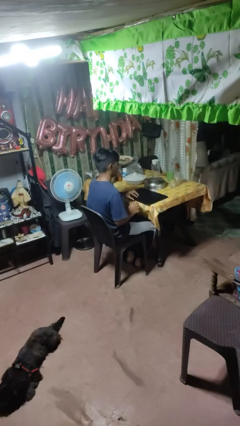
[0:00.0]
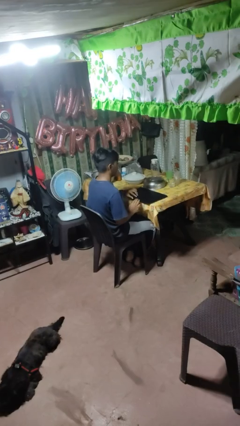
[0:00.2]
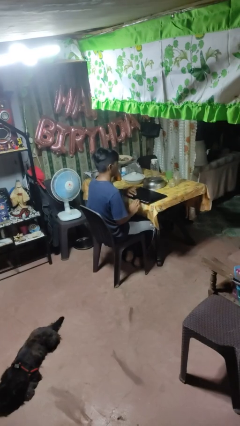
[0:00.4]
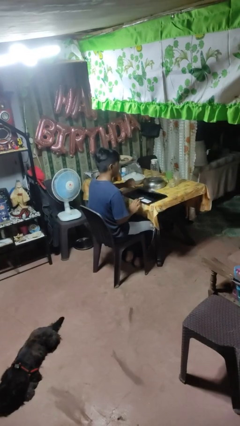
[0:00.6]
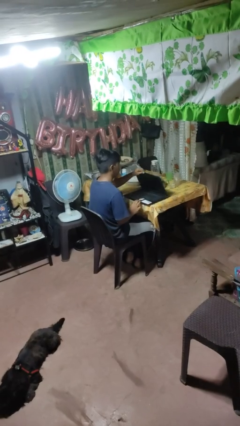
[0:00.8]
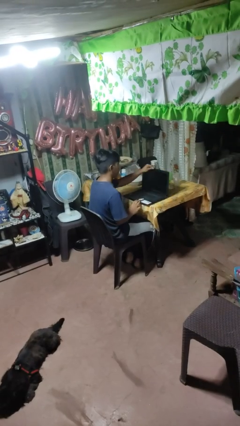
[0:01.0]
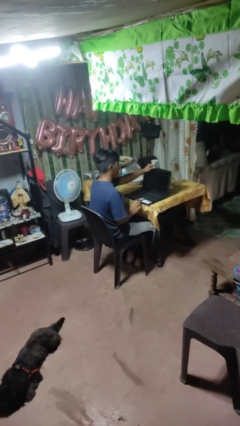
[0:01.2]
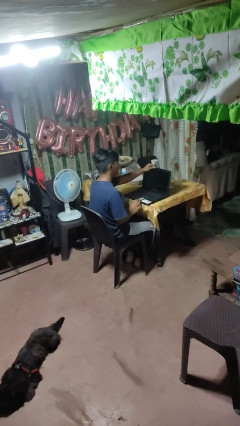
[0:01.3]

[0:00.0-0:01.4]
person opens laptop

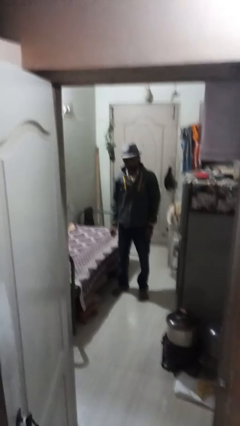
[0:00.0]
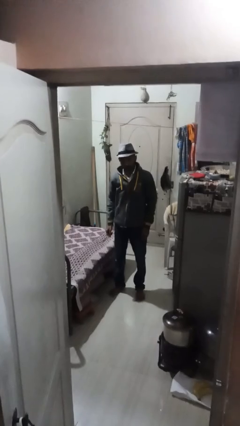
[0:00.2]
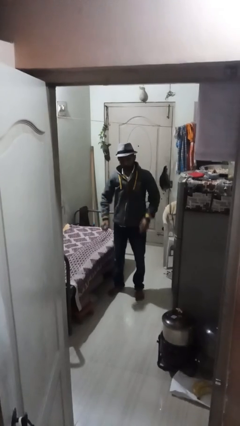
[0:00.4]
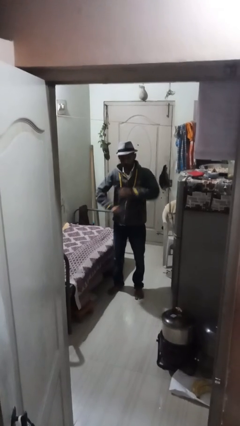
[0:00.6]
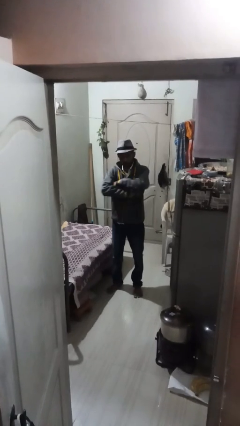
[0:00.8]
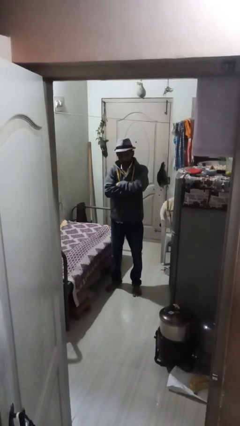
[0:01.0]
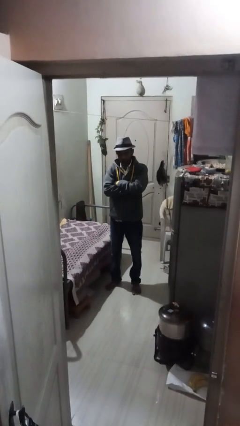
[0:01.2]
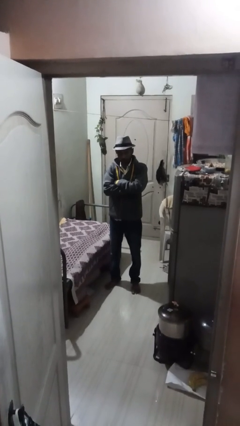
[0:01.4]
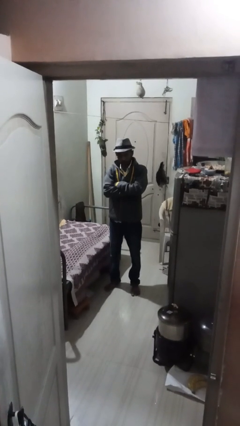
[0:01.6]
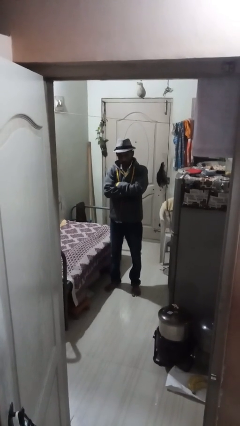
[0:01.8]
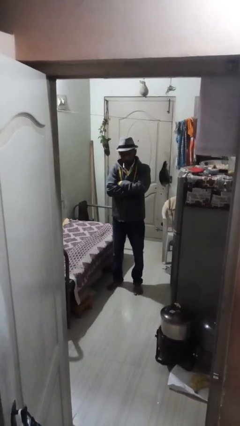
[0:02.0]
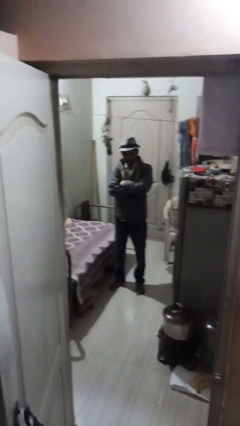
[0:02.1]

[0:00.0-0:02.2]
person crosses arms

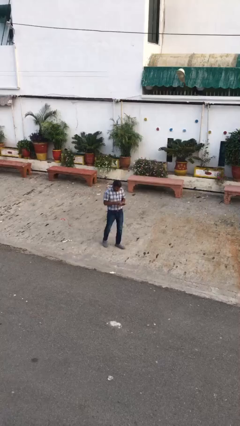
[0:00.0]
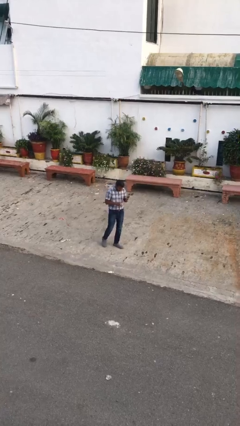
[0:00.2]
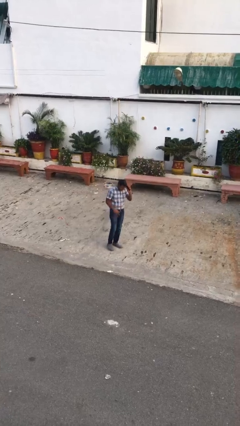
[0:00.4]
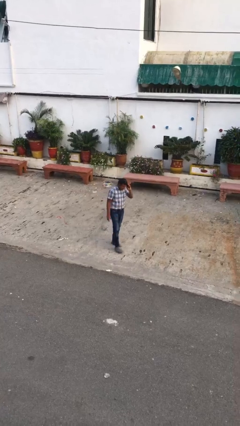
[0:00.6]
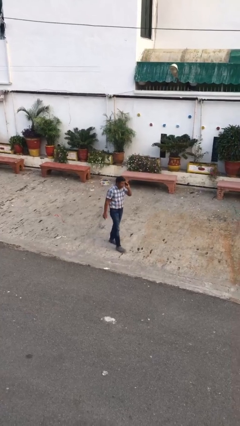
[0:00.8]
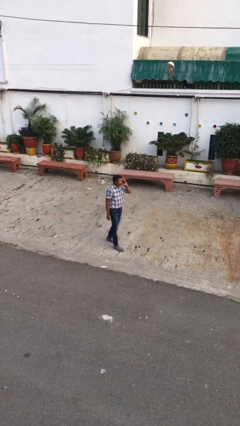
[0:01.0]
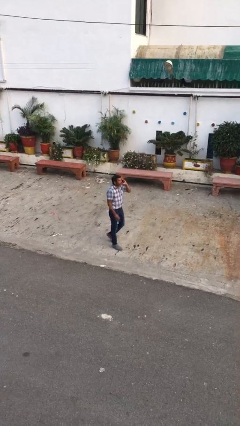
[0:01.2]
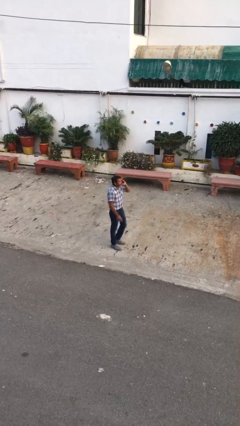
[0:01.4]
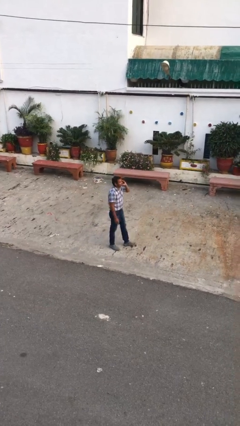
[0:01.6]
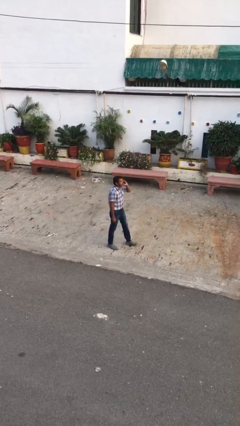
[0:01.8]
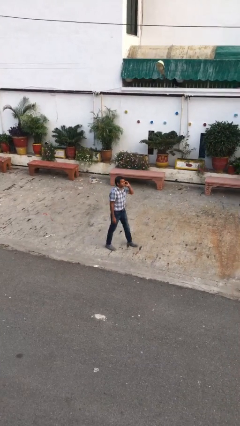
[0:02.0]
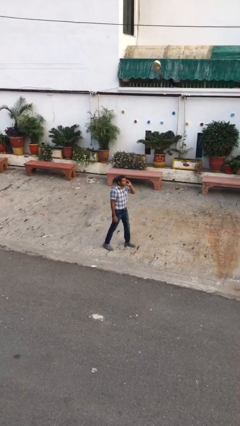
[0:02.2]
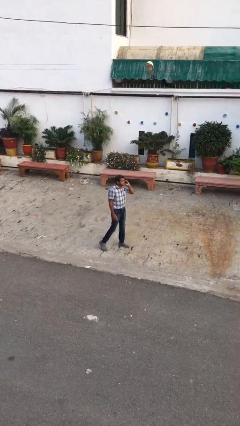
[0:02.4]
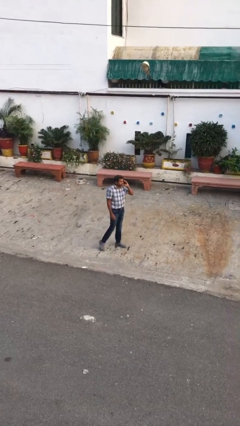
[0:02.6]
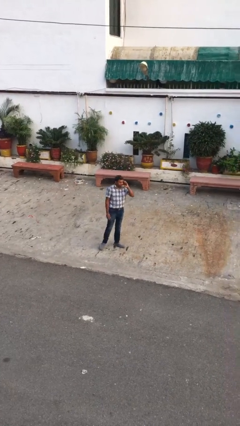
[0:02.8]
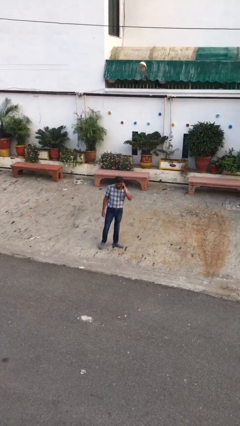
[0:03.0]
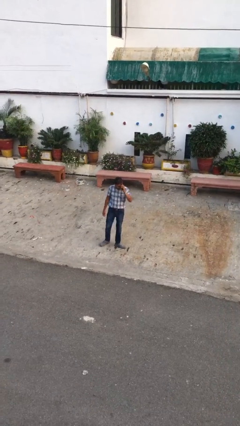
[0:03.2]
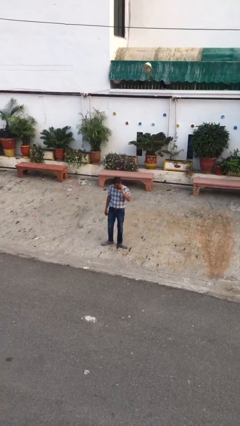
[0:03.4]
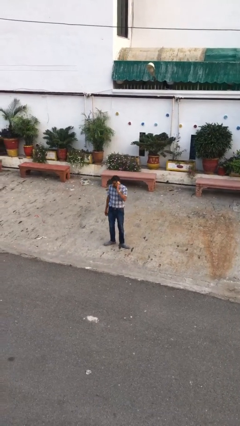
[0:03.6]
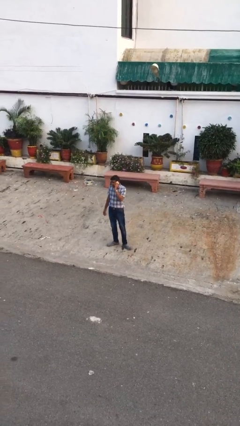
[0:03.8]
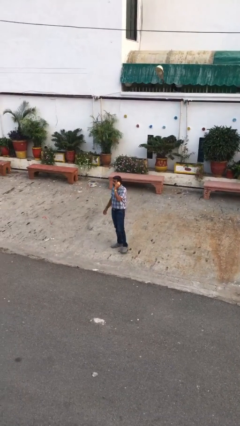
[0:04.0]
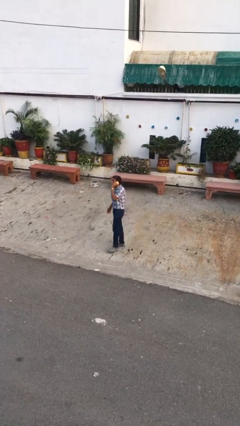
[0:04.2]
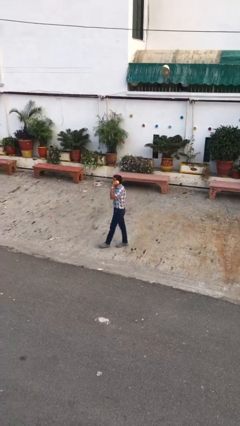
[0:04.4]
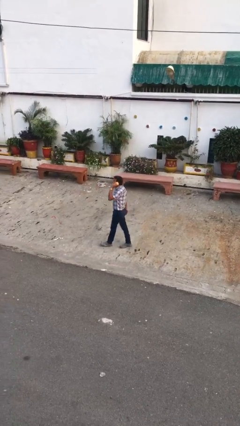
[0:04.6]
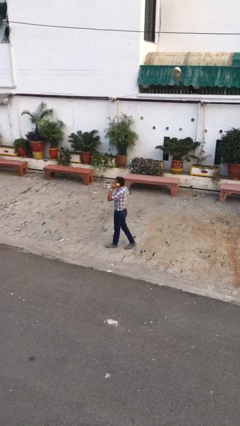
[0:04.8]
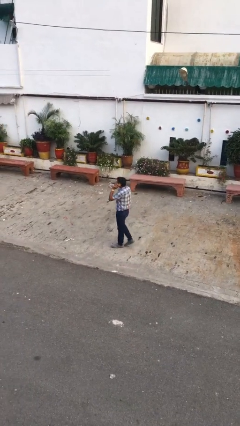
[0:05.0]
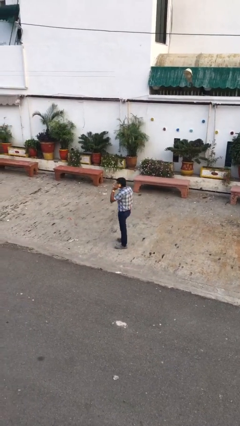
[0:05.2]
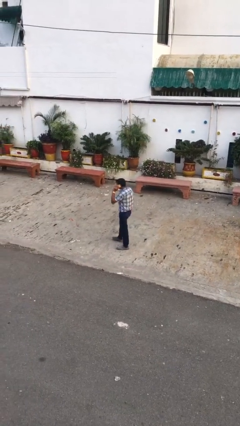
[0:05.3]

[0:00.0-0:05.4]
person talks on phone

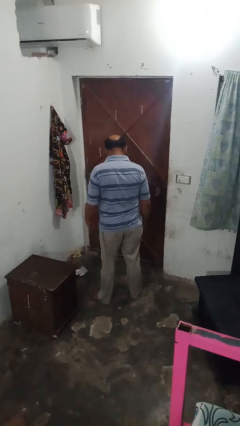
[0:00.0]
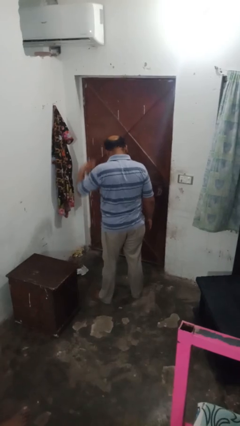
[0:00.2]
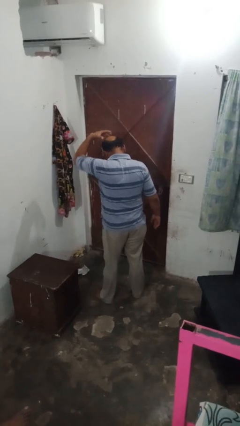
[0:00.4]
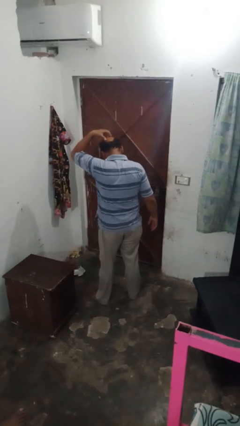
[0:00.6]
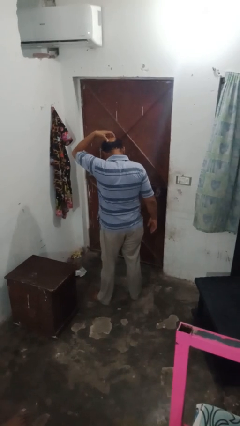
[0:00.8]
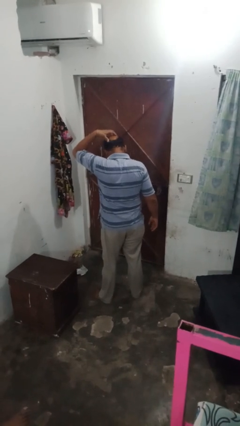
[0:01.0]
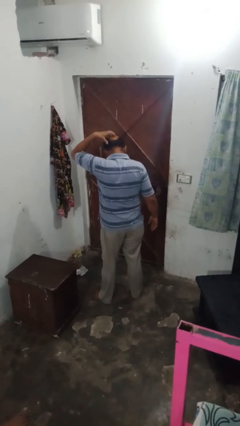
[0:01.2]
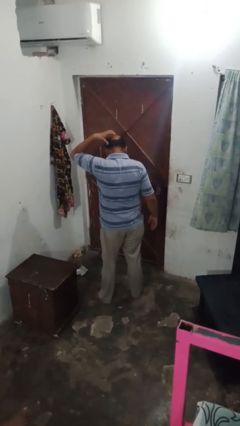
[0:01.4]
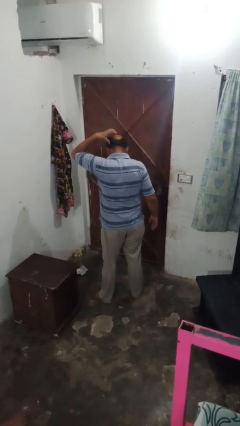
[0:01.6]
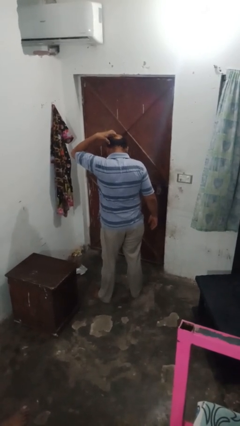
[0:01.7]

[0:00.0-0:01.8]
person strokes hair

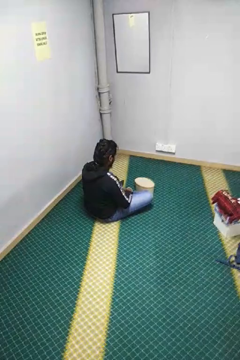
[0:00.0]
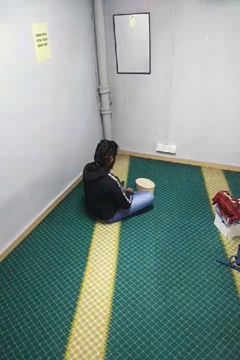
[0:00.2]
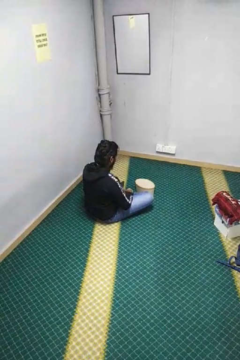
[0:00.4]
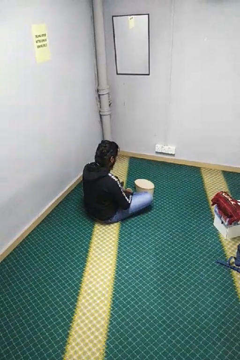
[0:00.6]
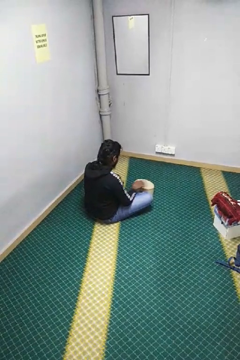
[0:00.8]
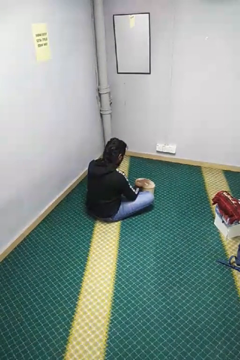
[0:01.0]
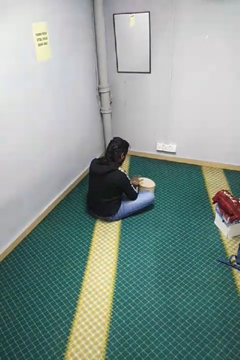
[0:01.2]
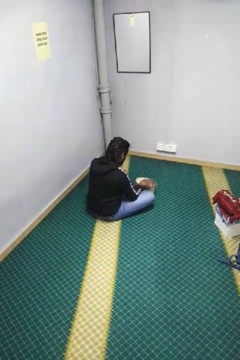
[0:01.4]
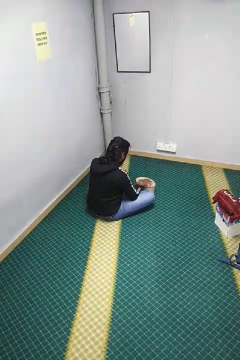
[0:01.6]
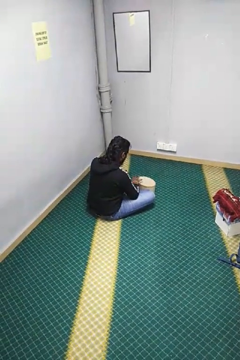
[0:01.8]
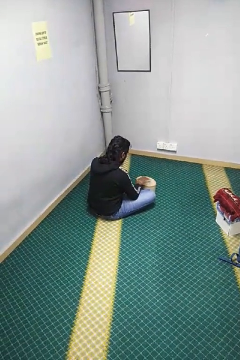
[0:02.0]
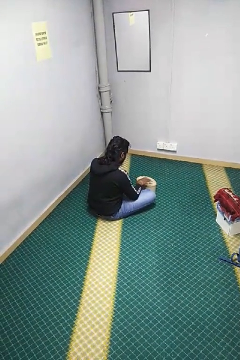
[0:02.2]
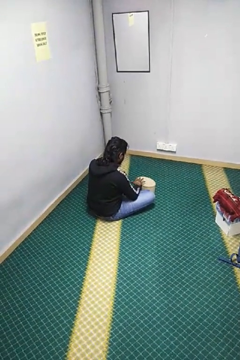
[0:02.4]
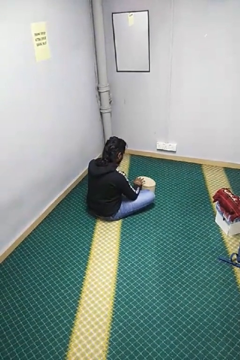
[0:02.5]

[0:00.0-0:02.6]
person waves hand over object

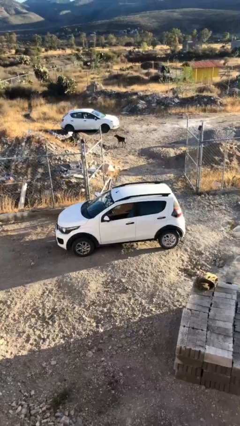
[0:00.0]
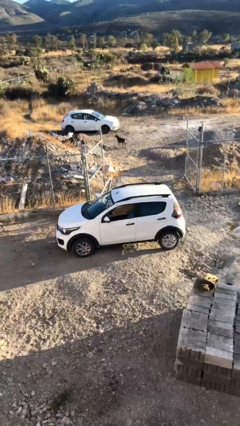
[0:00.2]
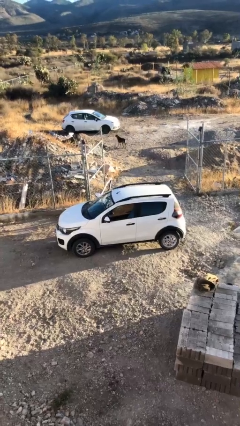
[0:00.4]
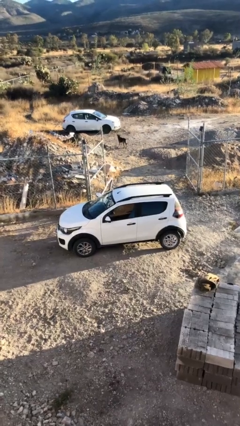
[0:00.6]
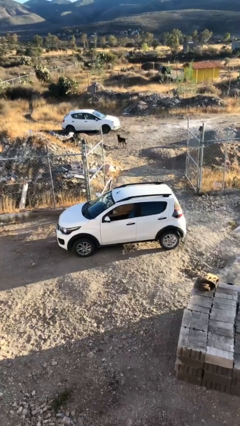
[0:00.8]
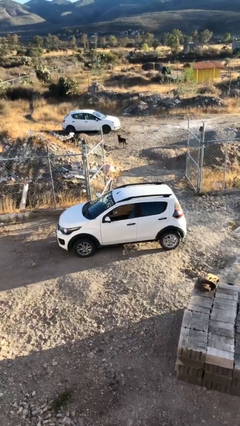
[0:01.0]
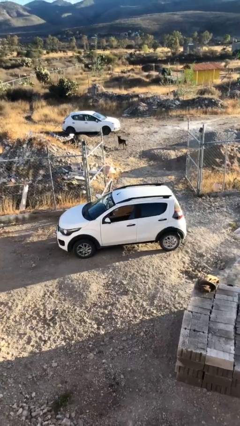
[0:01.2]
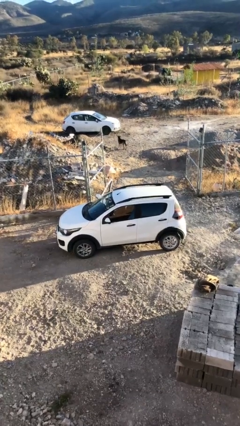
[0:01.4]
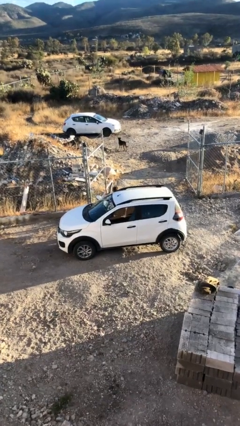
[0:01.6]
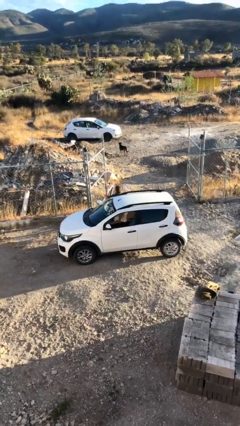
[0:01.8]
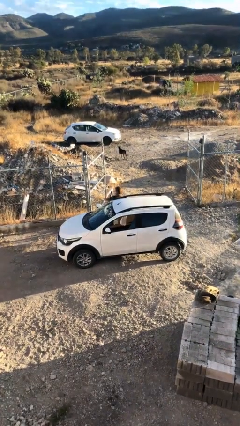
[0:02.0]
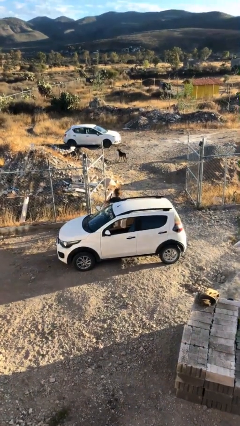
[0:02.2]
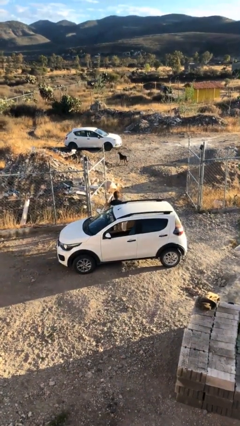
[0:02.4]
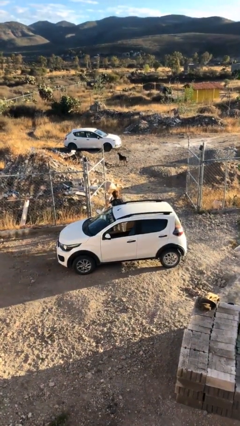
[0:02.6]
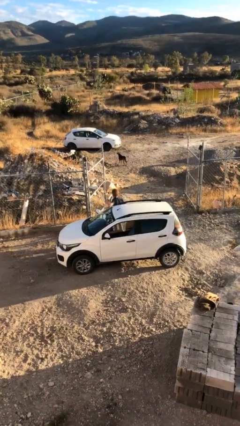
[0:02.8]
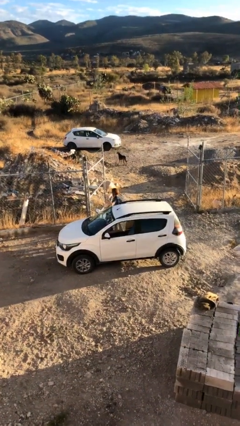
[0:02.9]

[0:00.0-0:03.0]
person exits car

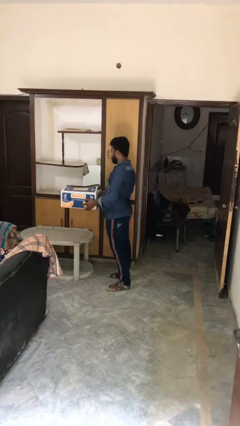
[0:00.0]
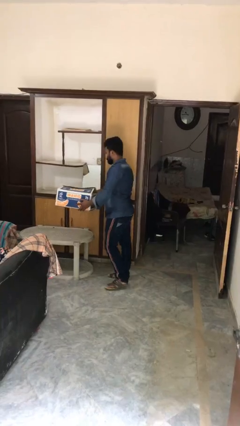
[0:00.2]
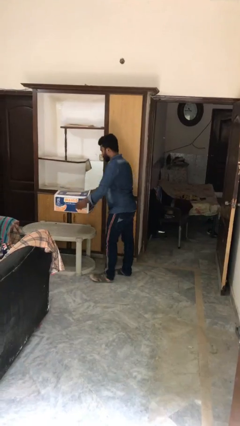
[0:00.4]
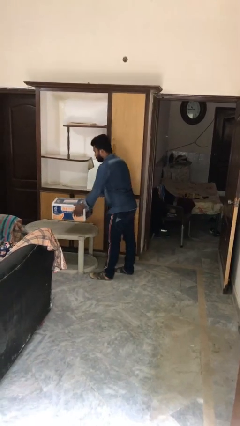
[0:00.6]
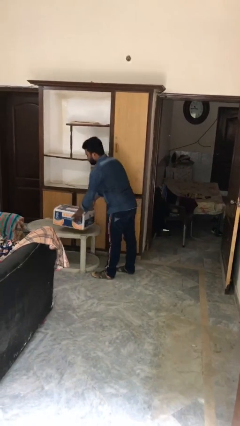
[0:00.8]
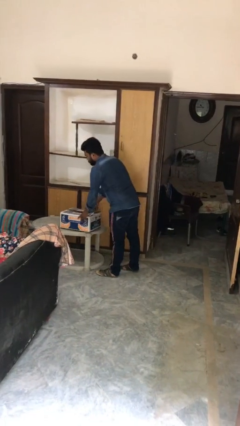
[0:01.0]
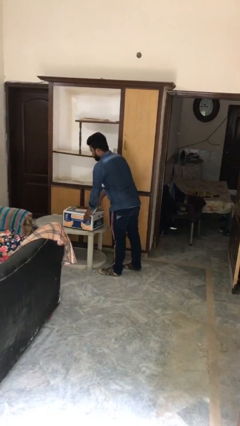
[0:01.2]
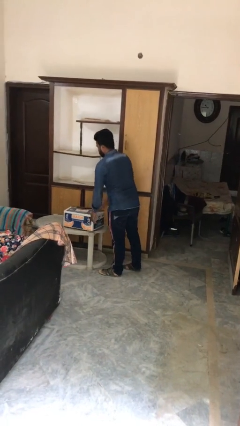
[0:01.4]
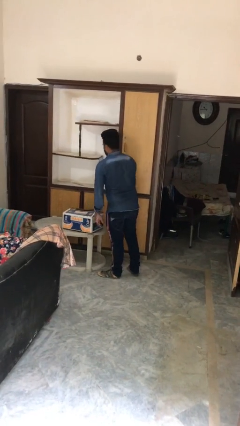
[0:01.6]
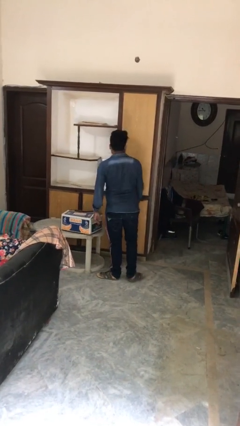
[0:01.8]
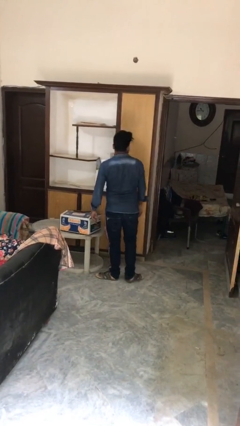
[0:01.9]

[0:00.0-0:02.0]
person puts down object on table
